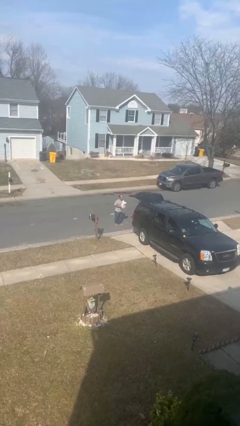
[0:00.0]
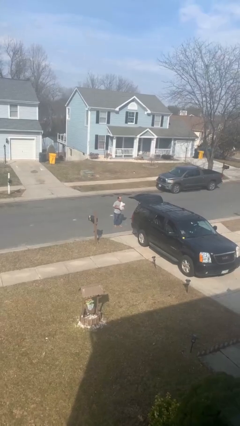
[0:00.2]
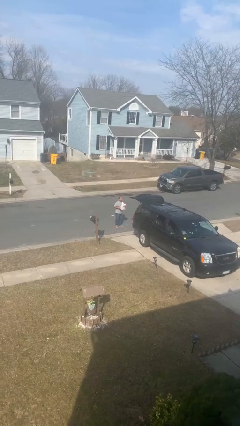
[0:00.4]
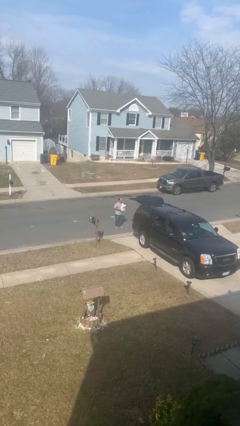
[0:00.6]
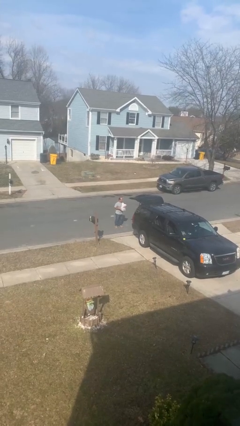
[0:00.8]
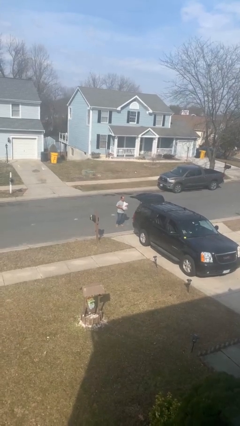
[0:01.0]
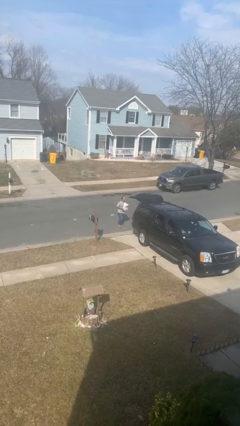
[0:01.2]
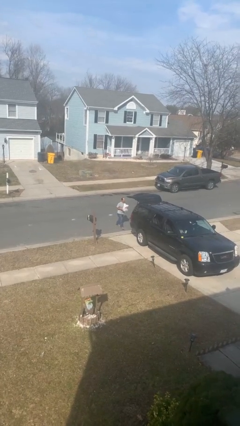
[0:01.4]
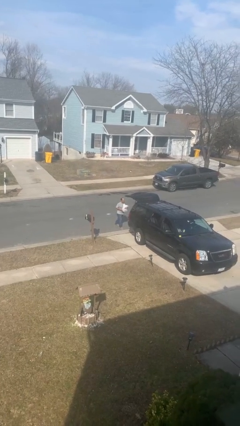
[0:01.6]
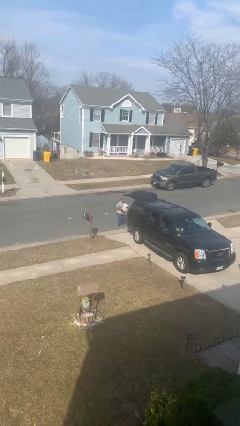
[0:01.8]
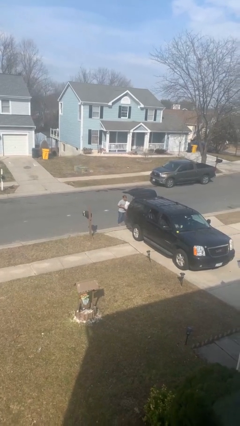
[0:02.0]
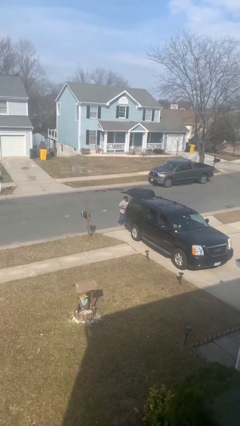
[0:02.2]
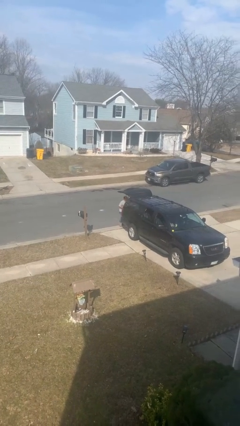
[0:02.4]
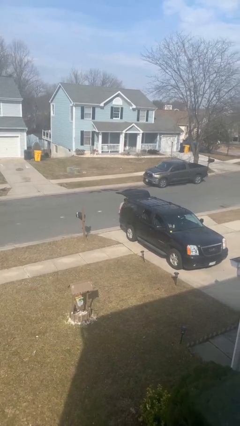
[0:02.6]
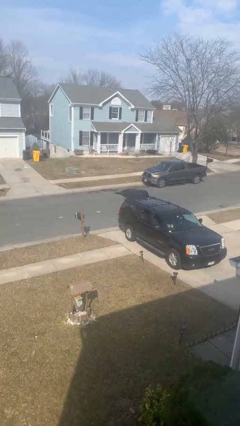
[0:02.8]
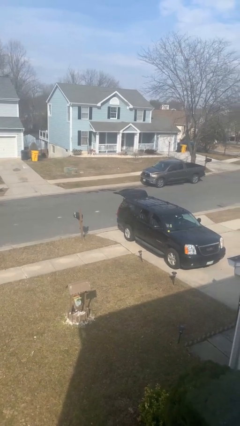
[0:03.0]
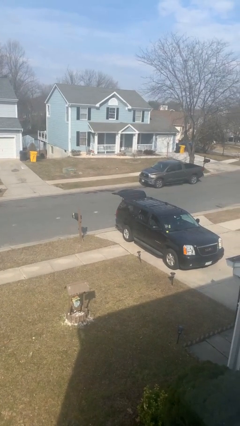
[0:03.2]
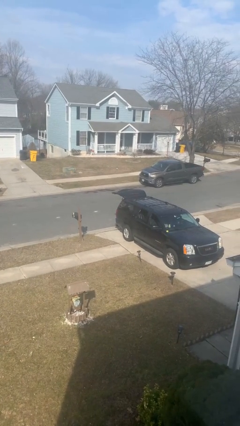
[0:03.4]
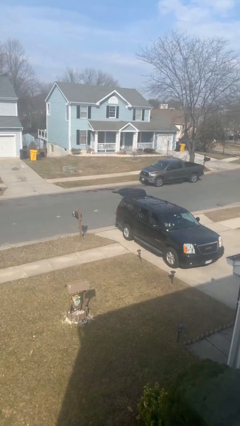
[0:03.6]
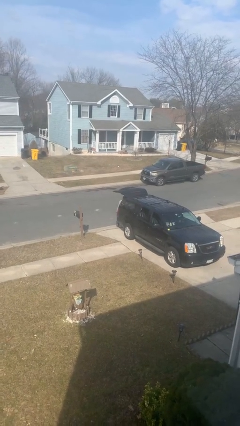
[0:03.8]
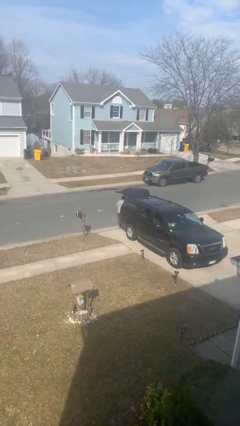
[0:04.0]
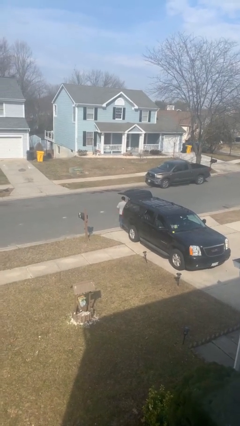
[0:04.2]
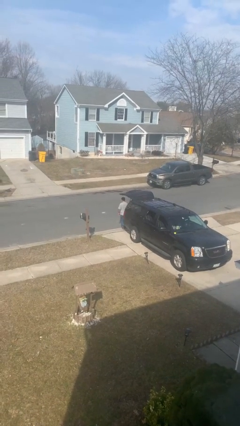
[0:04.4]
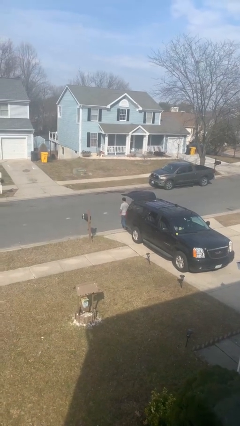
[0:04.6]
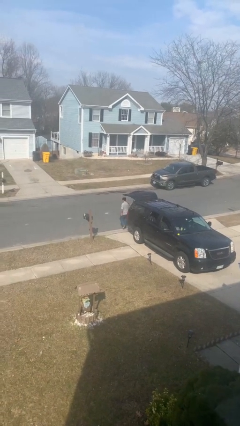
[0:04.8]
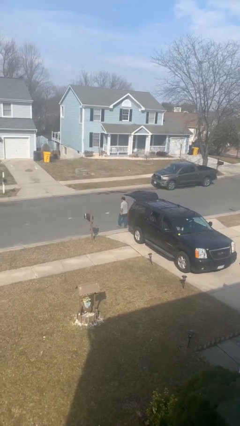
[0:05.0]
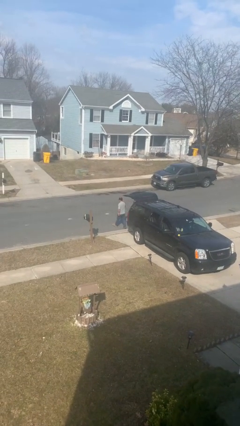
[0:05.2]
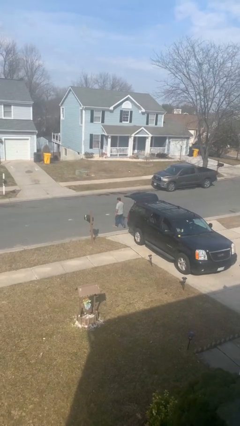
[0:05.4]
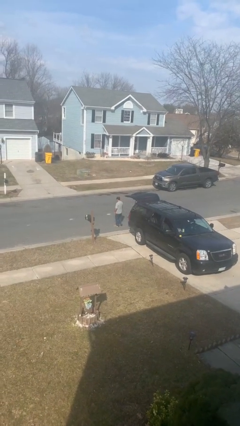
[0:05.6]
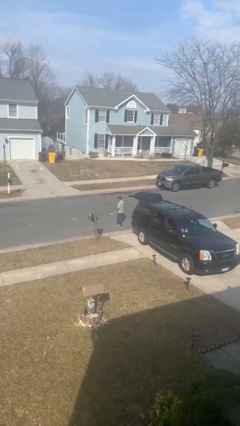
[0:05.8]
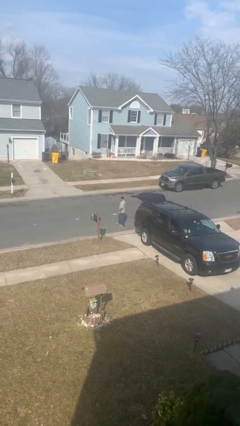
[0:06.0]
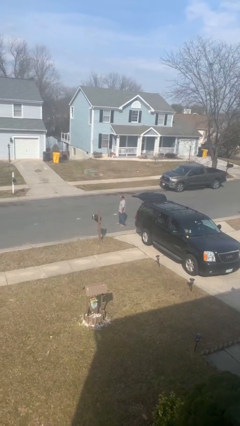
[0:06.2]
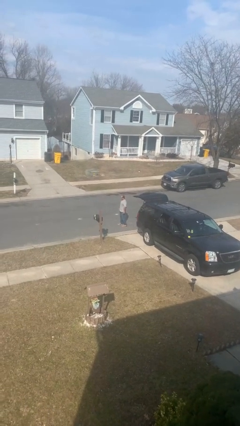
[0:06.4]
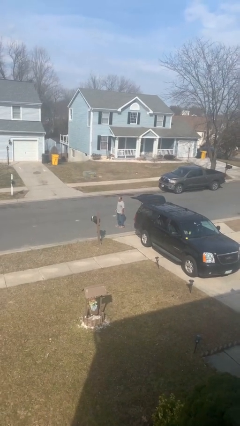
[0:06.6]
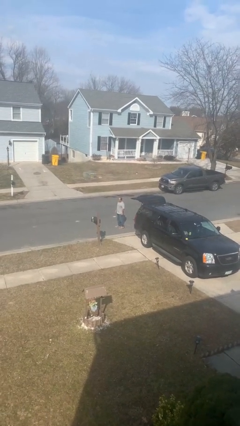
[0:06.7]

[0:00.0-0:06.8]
person loads car

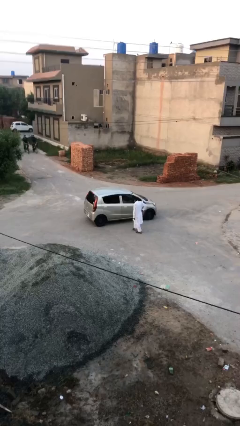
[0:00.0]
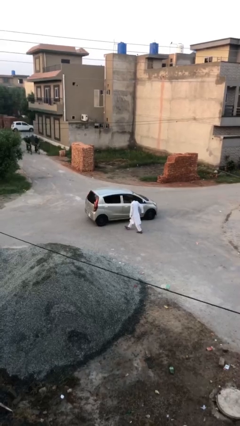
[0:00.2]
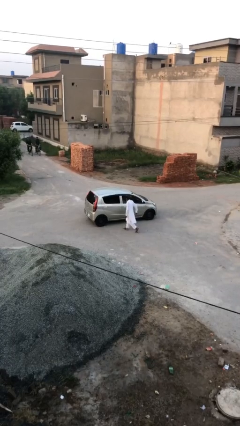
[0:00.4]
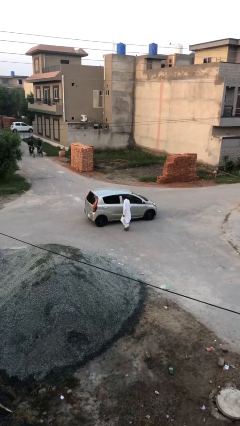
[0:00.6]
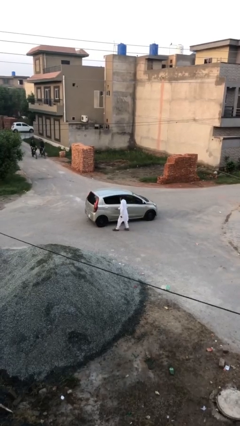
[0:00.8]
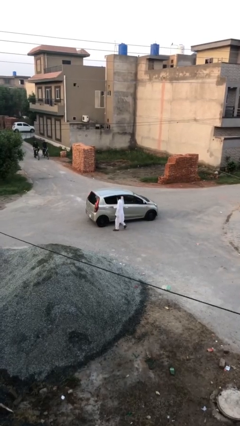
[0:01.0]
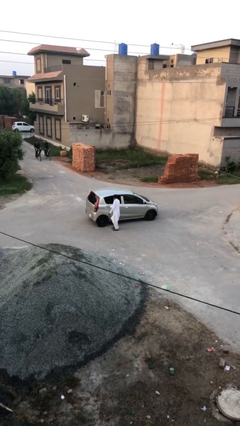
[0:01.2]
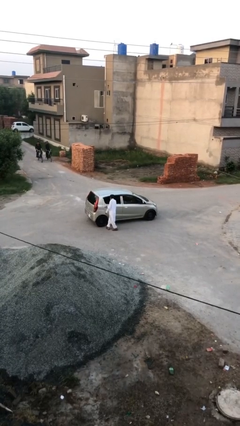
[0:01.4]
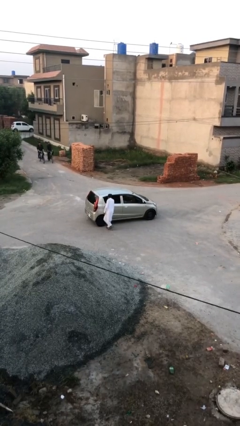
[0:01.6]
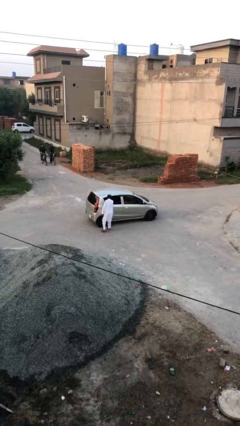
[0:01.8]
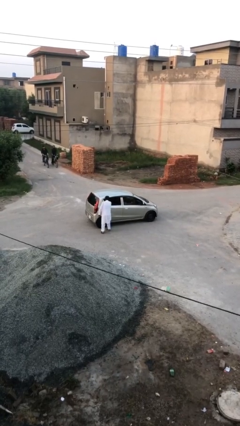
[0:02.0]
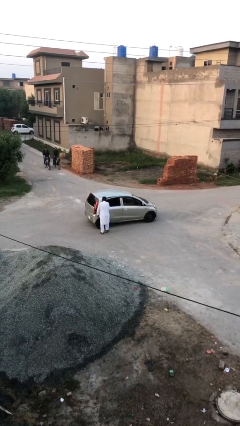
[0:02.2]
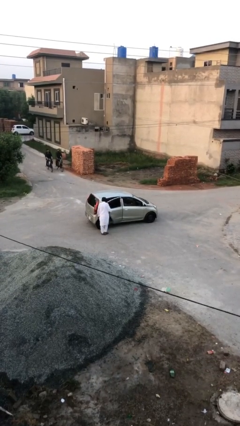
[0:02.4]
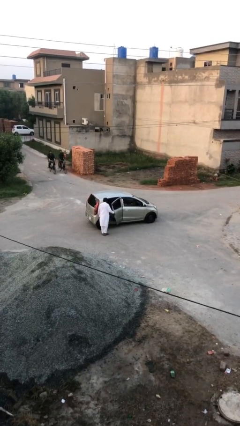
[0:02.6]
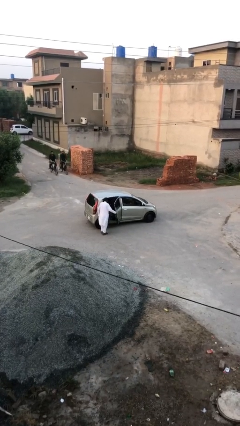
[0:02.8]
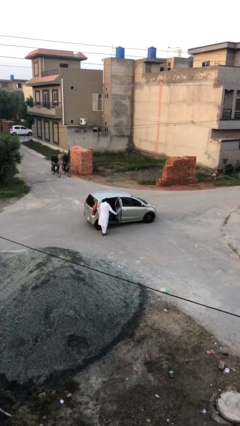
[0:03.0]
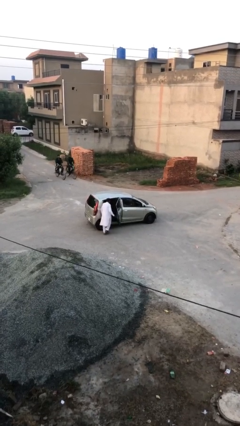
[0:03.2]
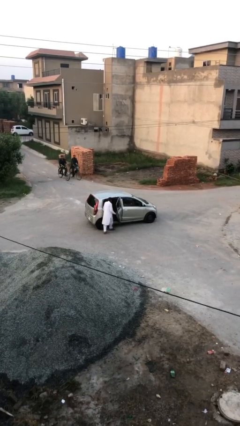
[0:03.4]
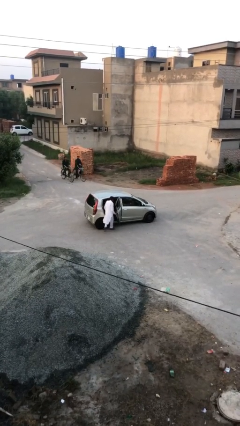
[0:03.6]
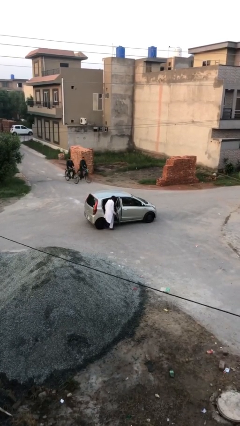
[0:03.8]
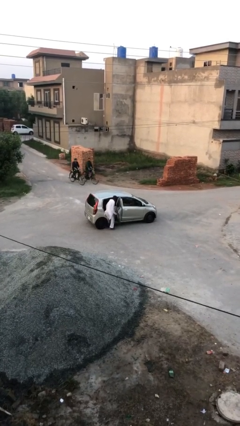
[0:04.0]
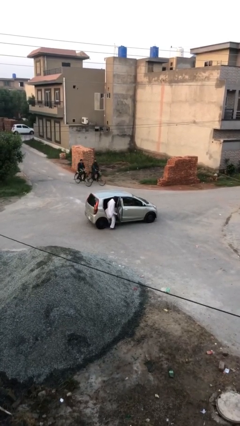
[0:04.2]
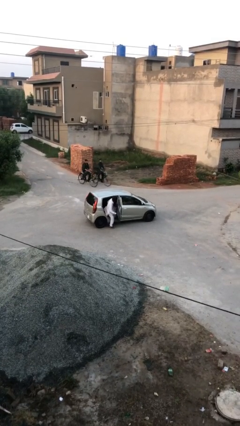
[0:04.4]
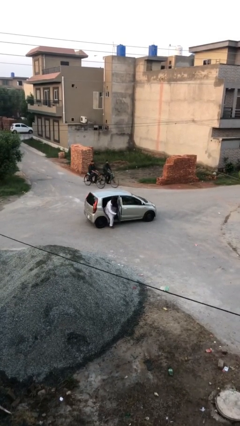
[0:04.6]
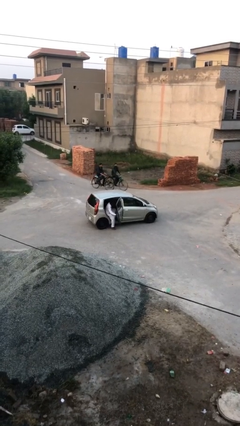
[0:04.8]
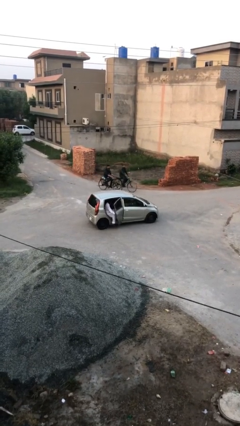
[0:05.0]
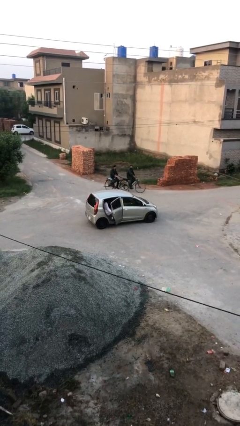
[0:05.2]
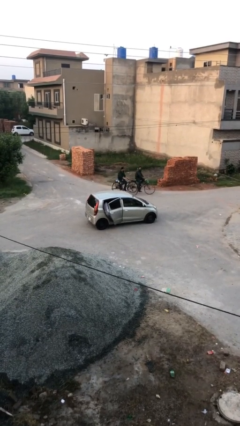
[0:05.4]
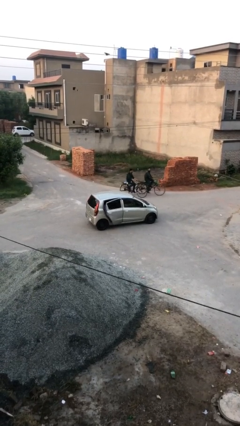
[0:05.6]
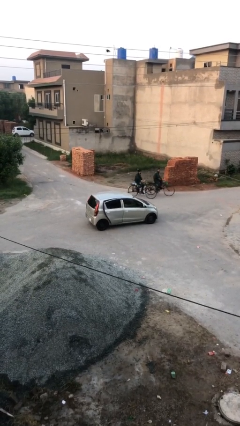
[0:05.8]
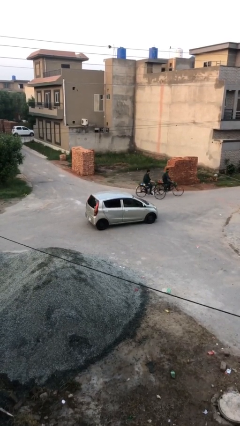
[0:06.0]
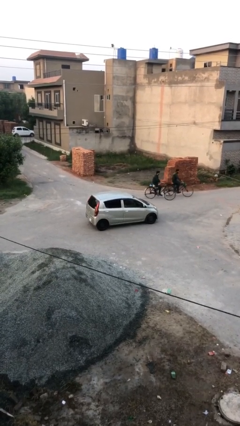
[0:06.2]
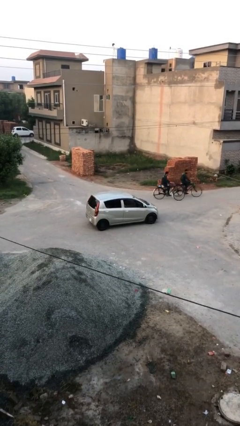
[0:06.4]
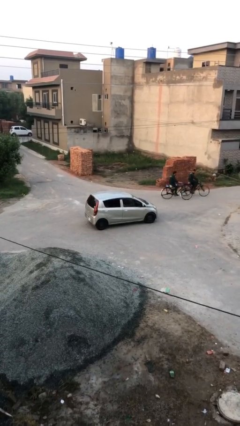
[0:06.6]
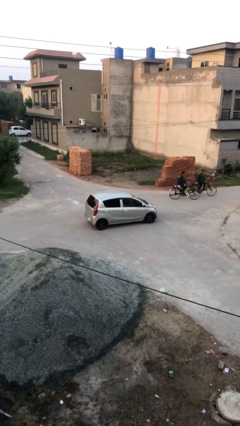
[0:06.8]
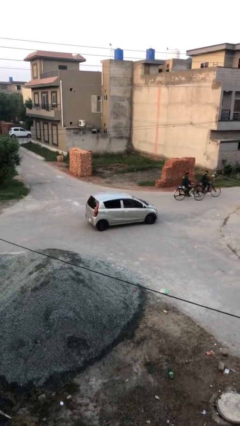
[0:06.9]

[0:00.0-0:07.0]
car picks up person

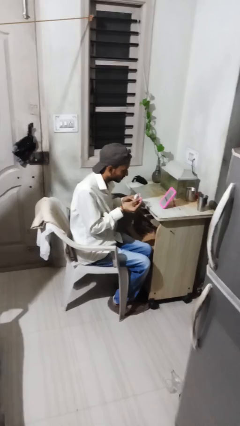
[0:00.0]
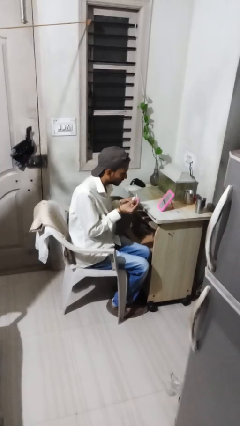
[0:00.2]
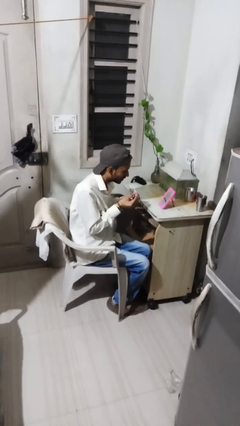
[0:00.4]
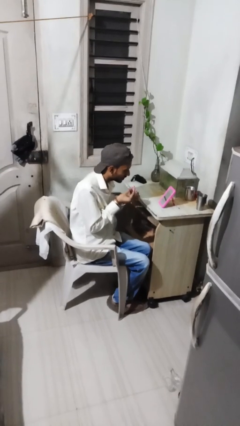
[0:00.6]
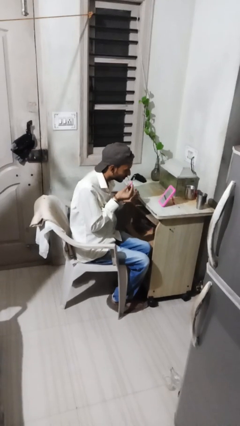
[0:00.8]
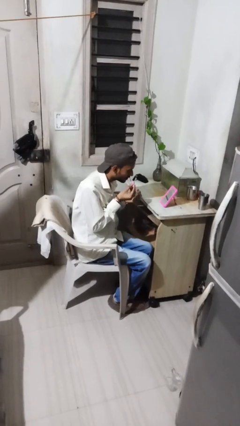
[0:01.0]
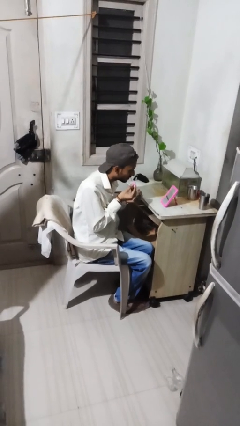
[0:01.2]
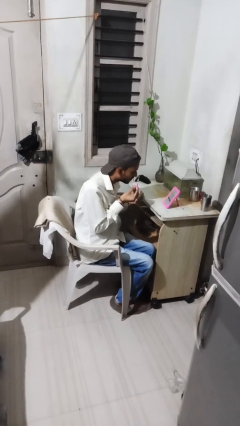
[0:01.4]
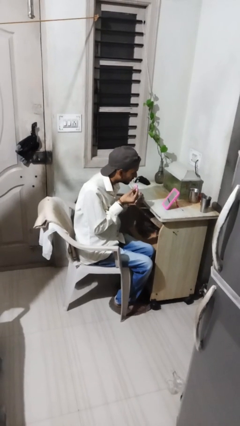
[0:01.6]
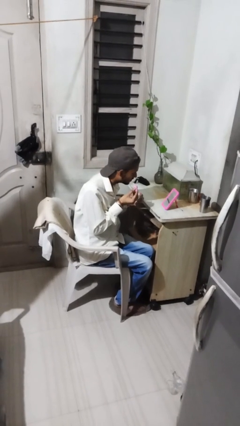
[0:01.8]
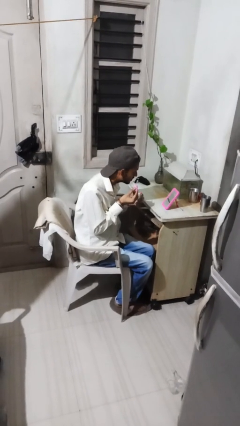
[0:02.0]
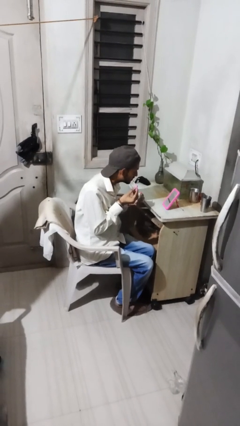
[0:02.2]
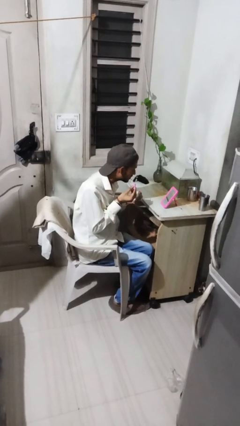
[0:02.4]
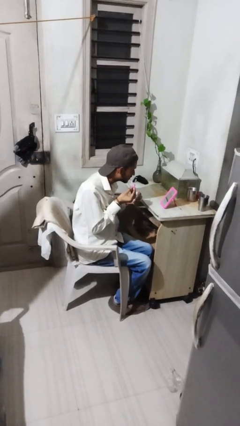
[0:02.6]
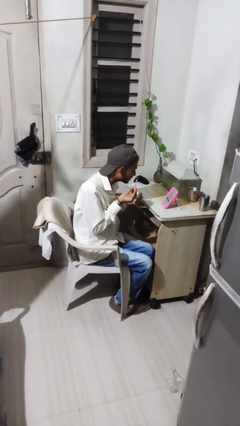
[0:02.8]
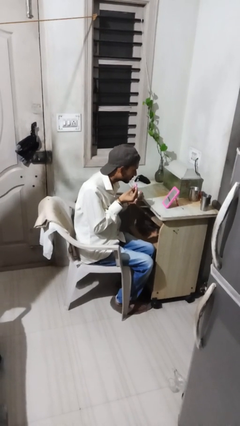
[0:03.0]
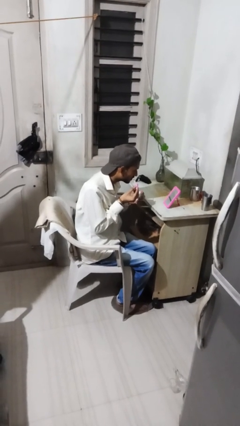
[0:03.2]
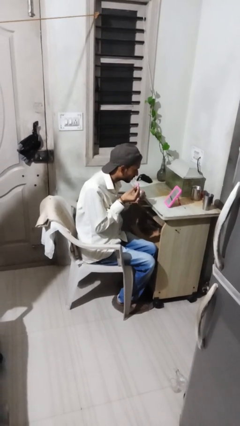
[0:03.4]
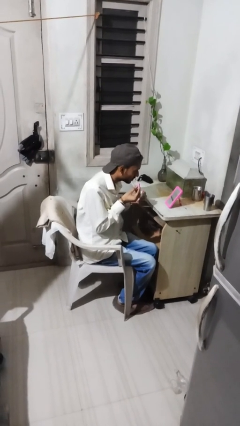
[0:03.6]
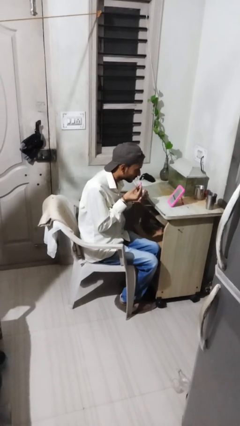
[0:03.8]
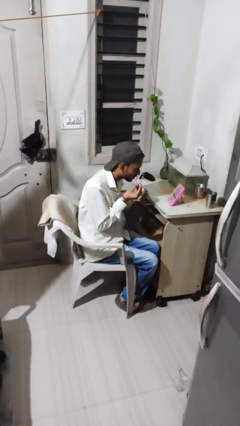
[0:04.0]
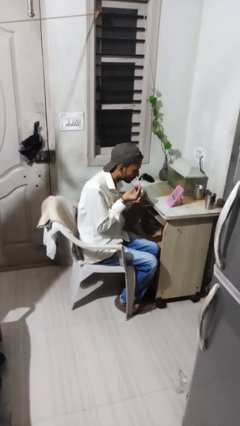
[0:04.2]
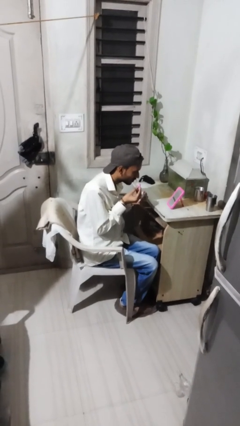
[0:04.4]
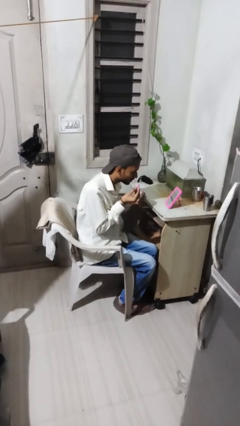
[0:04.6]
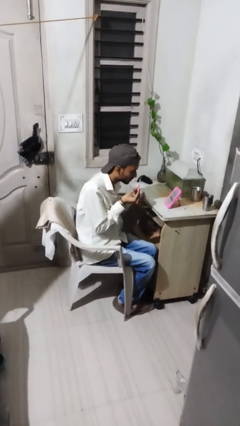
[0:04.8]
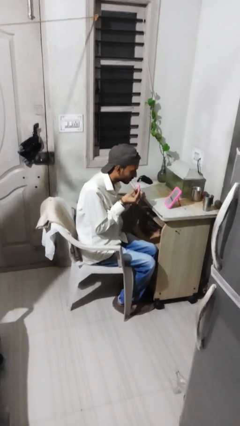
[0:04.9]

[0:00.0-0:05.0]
person applies lip makeup
